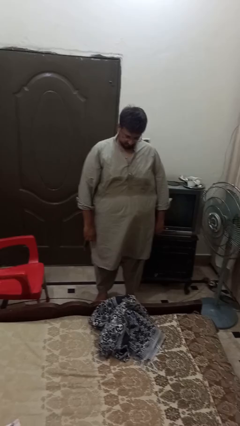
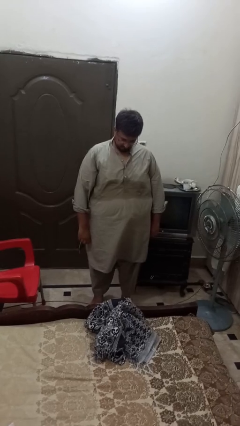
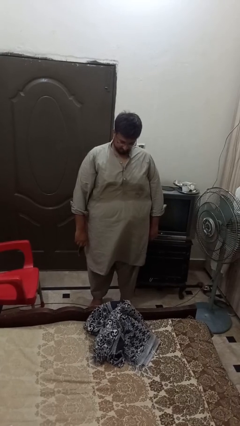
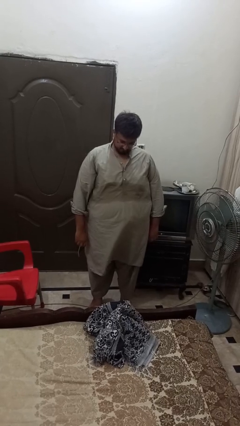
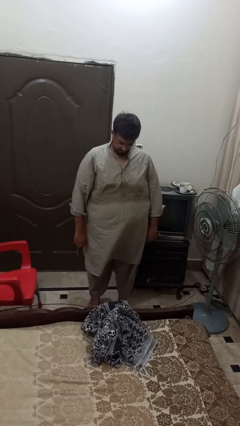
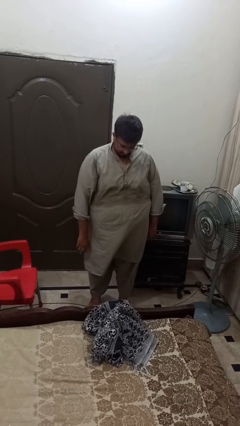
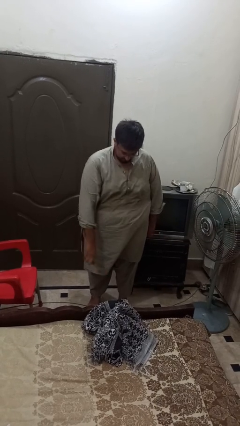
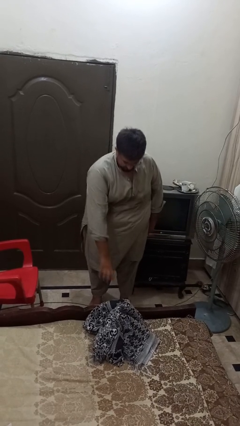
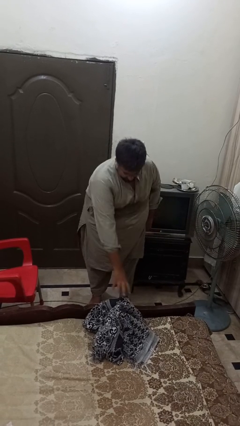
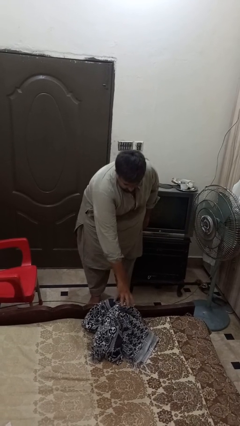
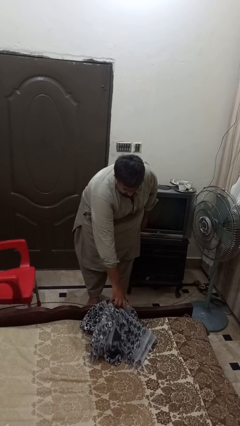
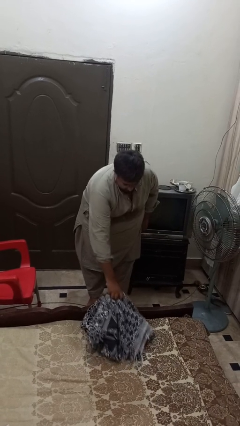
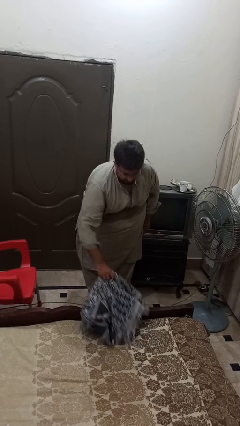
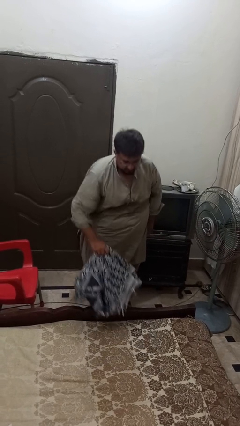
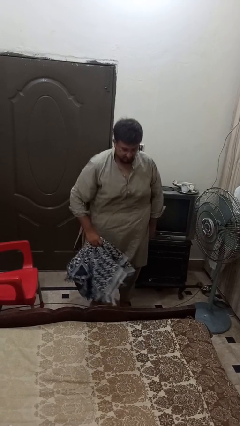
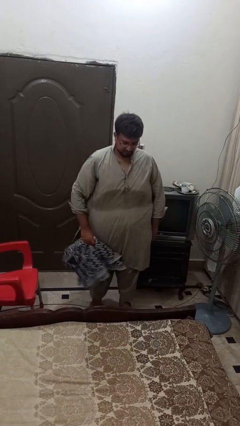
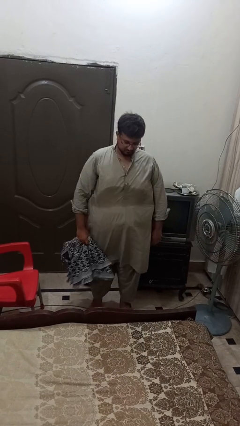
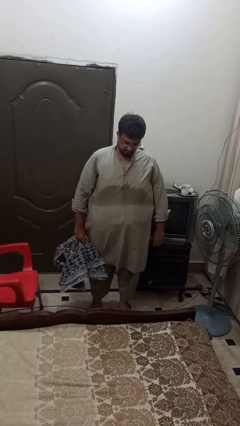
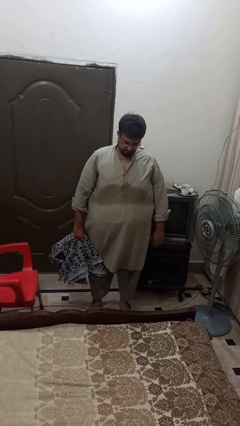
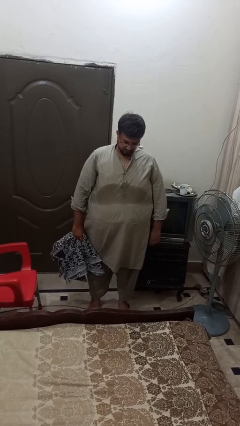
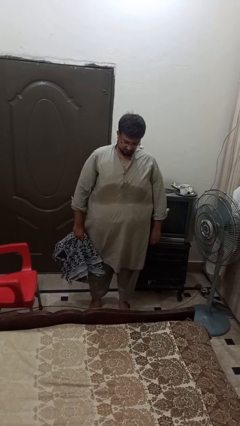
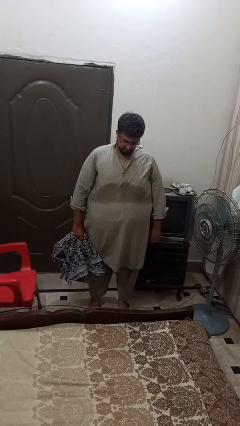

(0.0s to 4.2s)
person picks up object from bed

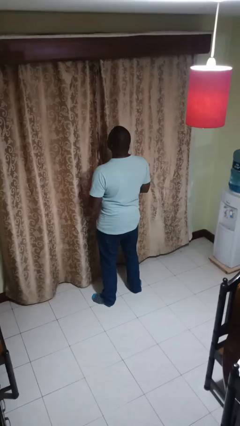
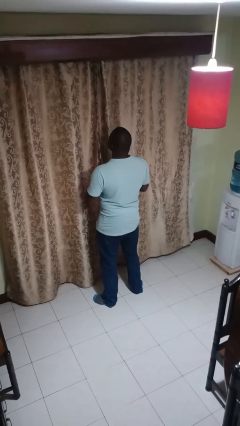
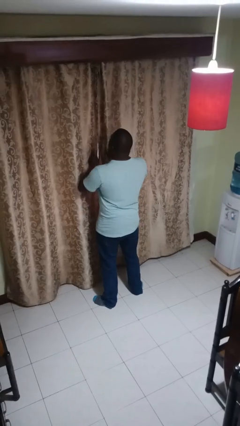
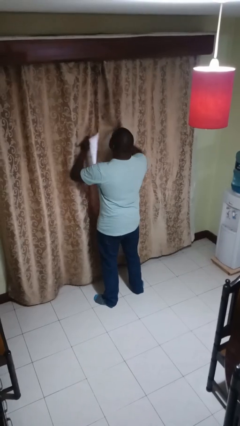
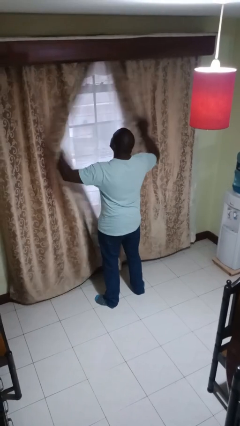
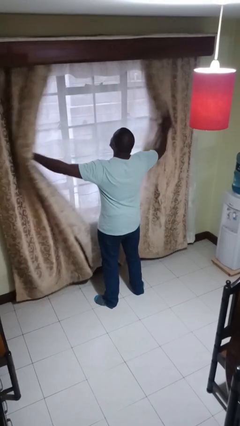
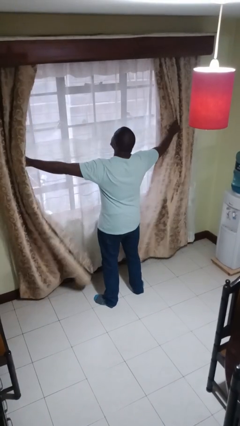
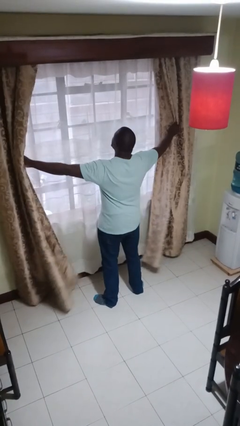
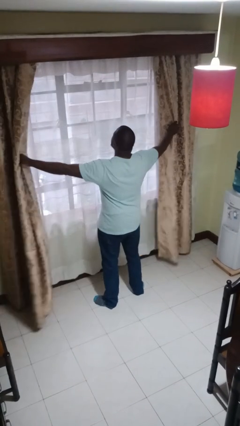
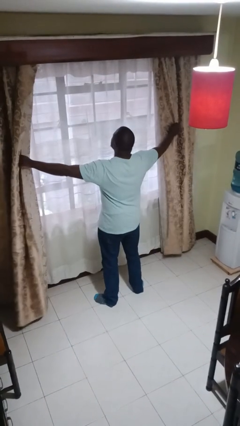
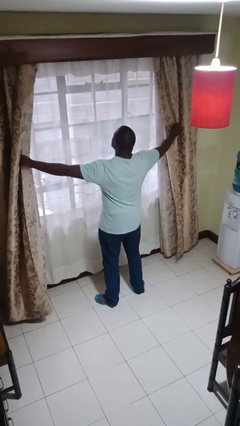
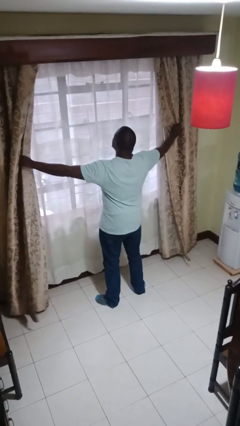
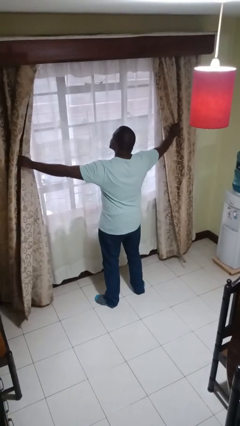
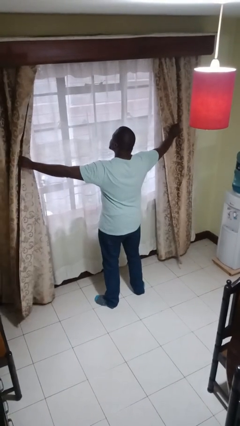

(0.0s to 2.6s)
person opens curtains

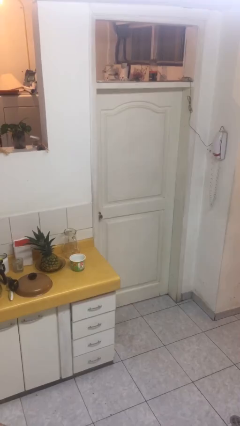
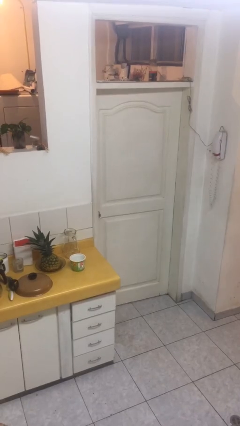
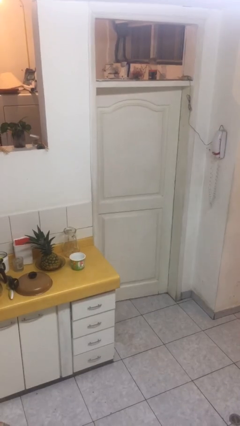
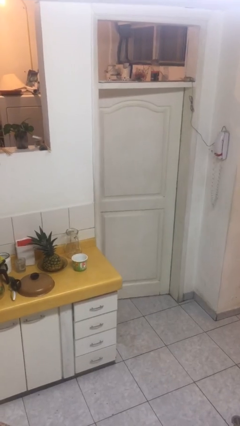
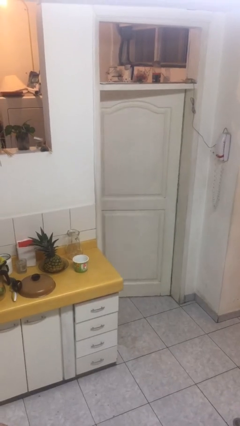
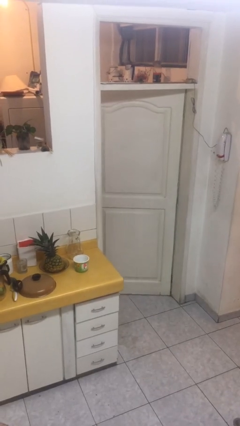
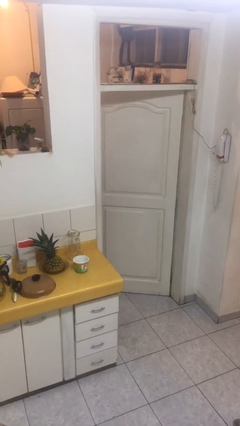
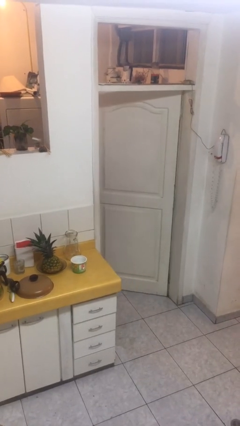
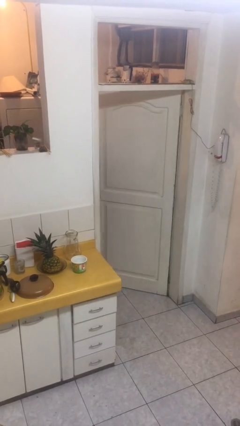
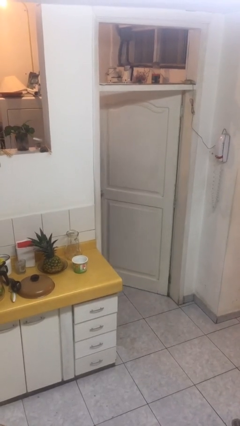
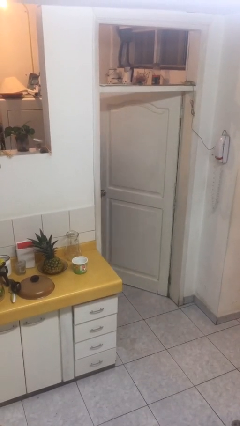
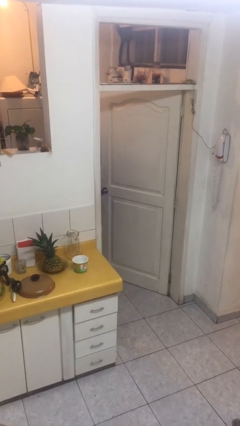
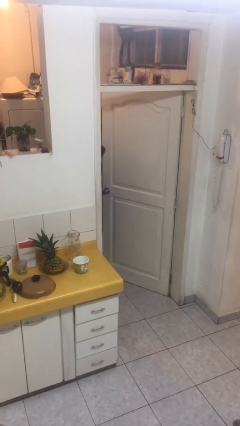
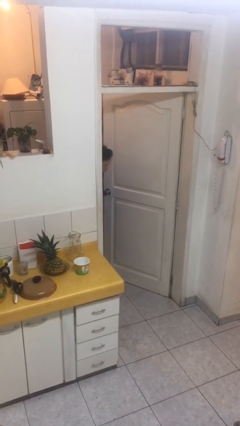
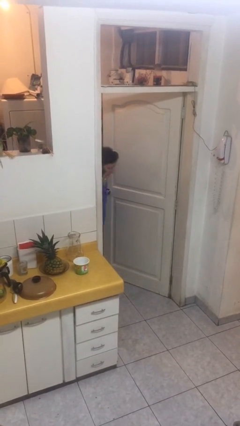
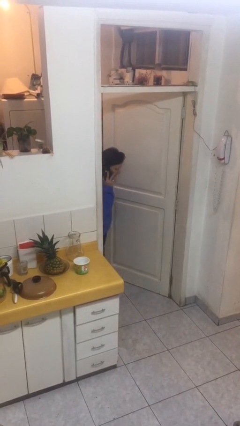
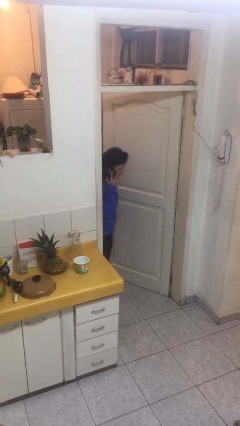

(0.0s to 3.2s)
person opens facility door

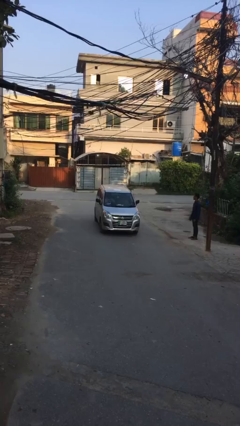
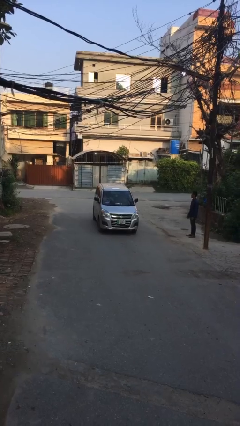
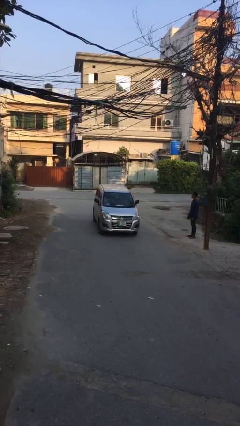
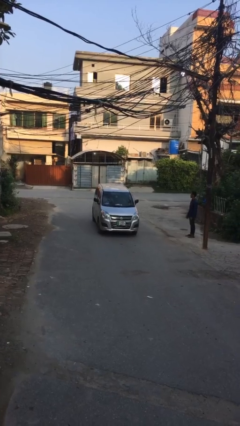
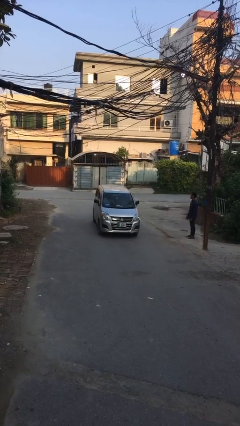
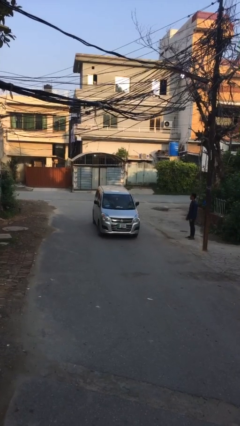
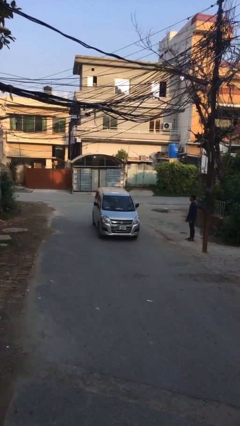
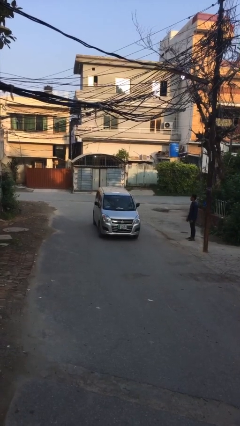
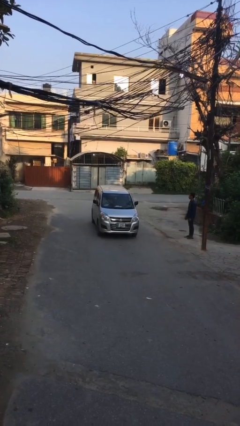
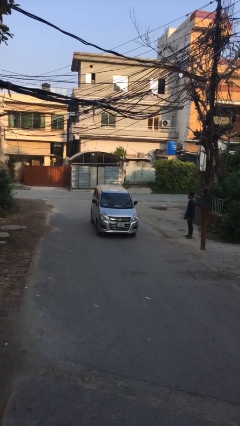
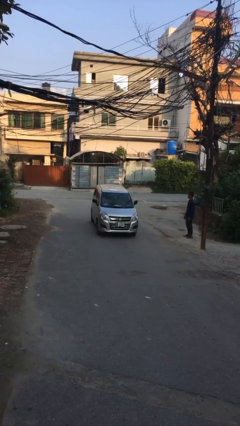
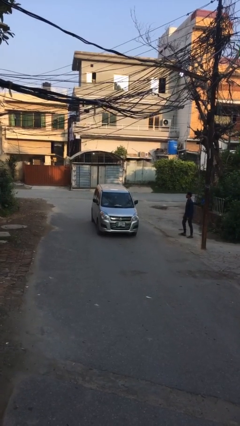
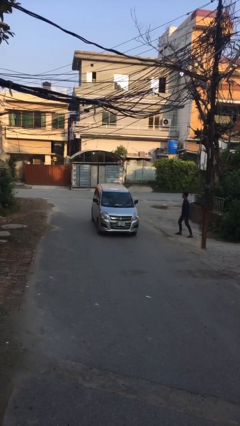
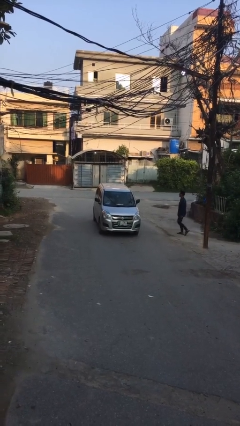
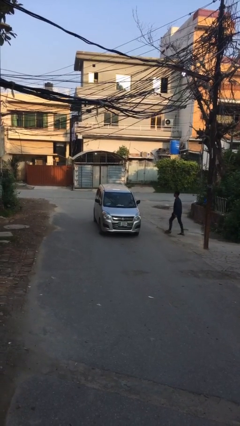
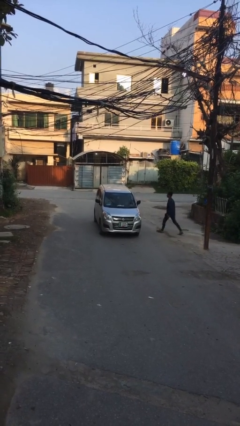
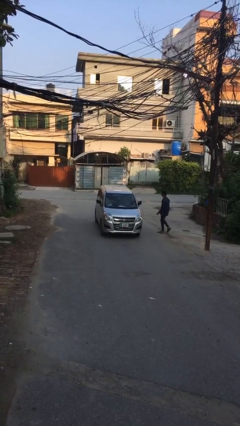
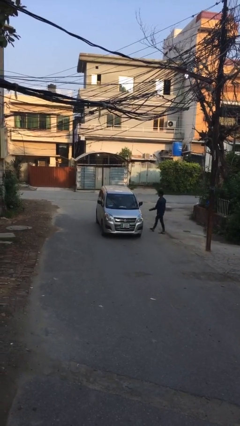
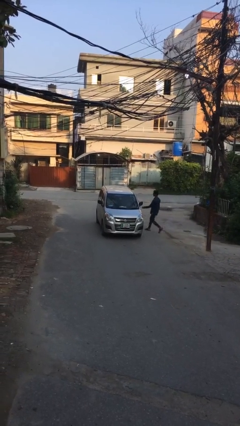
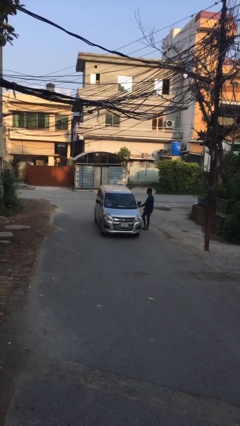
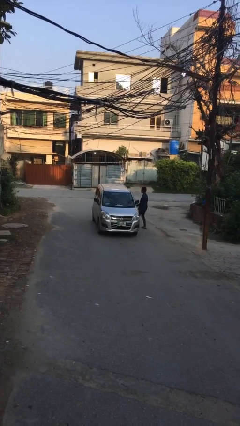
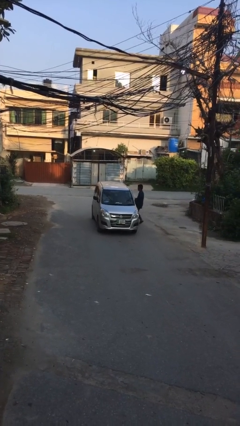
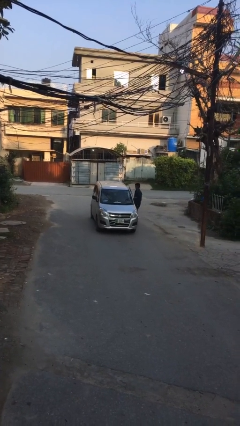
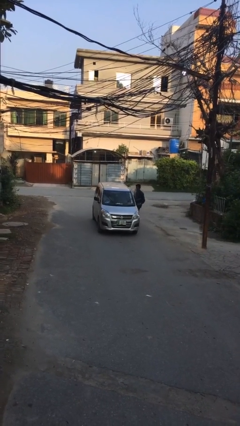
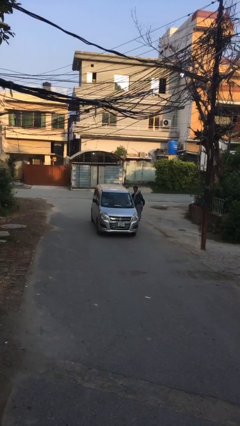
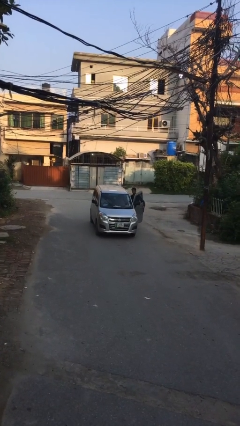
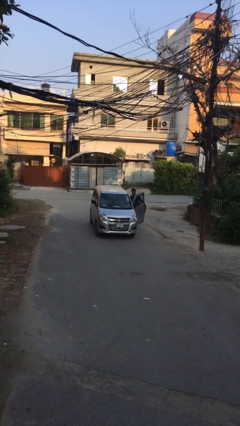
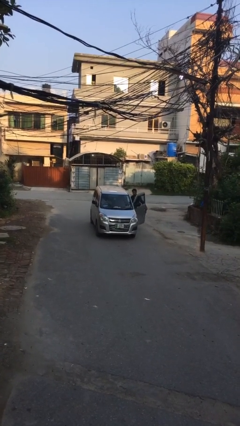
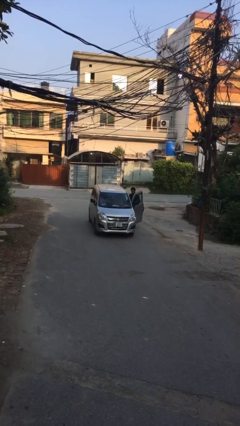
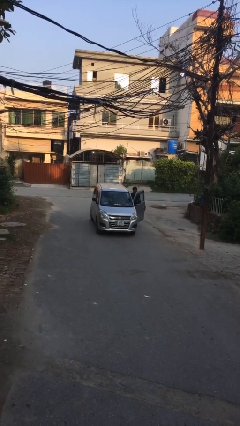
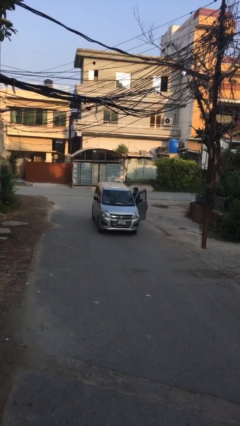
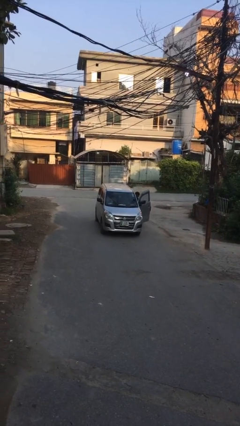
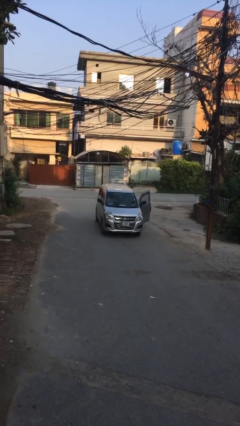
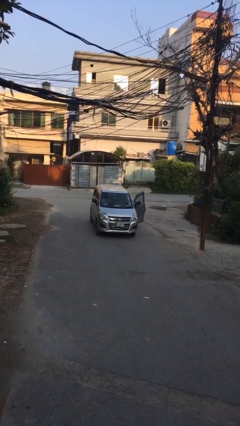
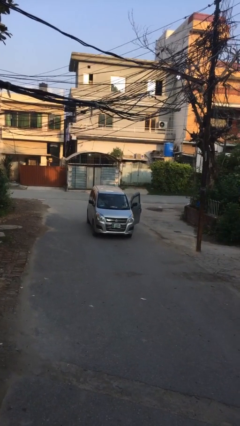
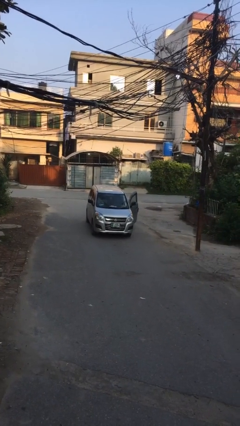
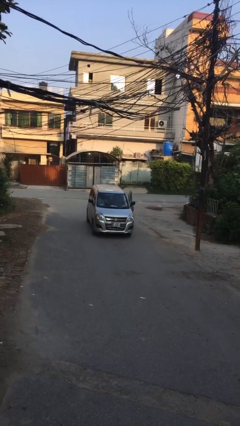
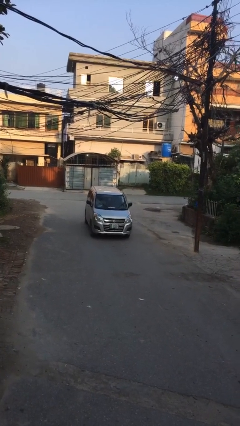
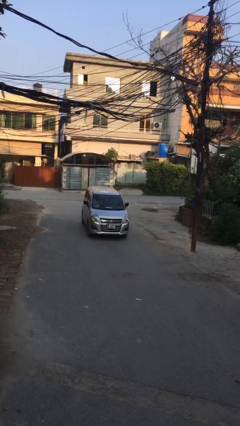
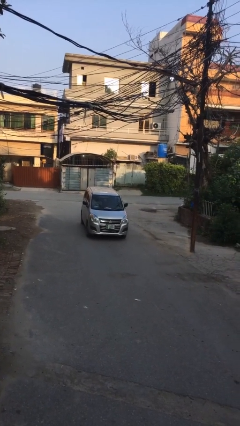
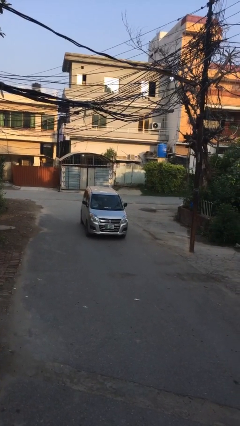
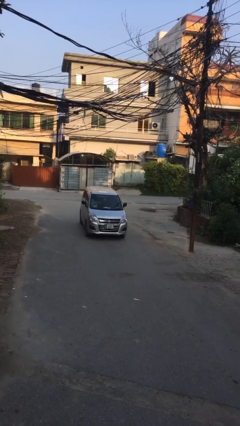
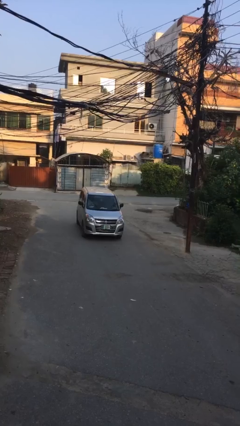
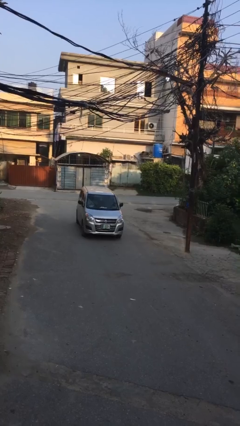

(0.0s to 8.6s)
car picks up person
